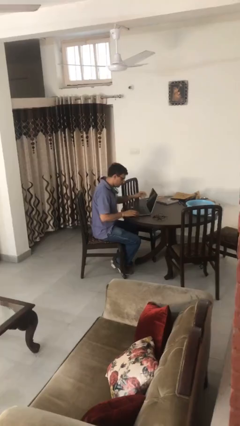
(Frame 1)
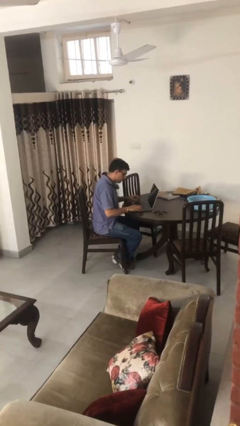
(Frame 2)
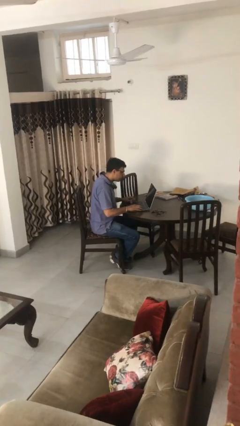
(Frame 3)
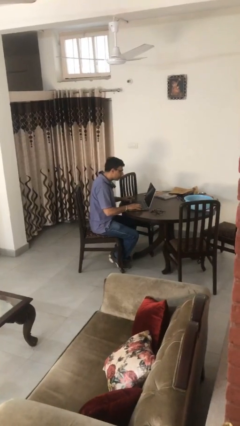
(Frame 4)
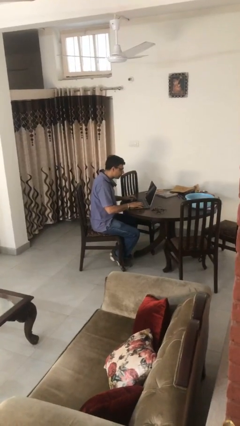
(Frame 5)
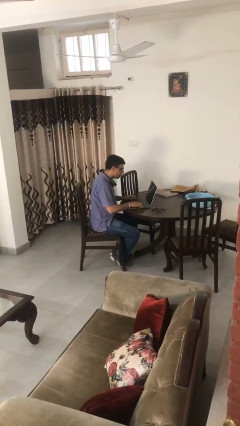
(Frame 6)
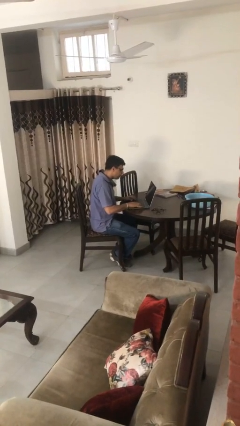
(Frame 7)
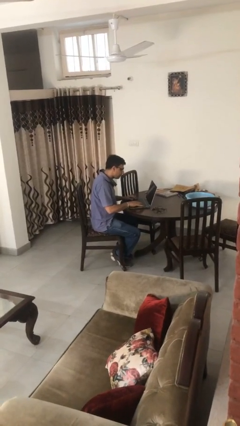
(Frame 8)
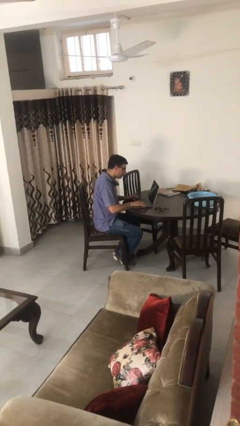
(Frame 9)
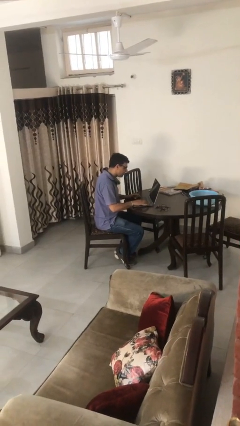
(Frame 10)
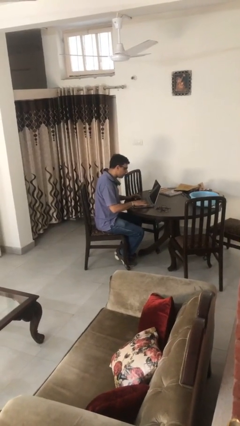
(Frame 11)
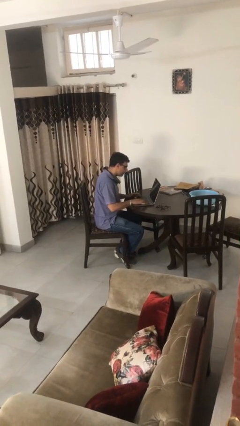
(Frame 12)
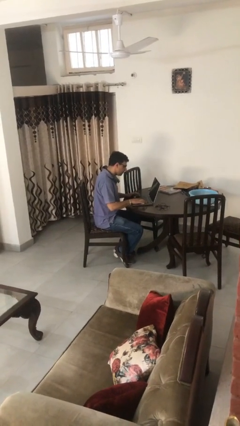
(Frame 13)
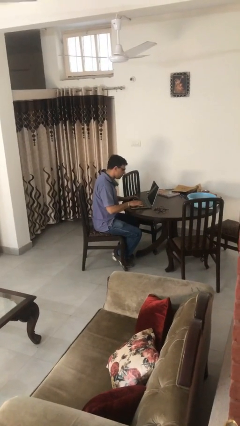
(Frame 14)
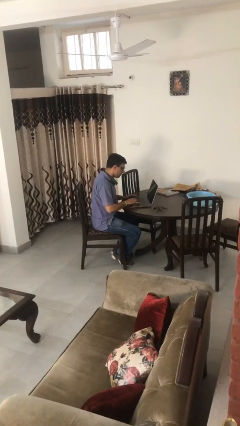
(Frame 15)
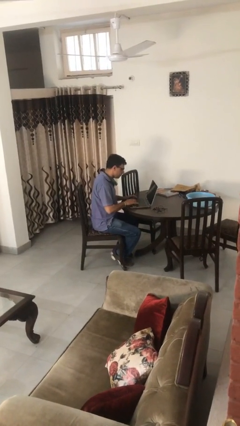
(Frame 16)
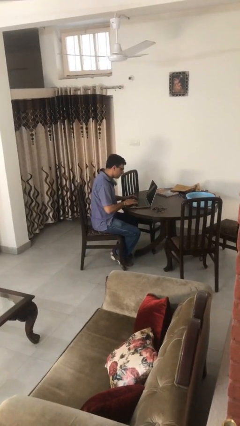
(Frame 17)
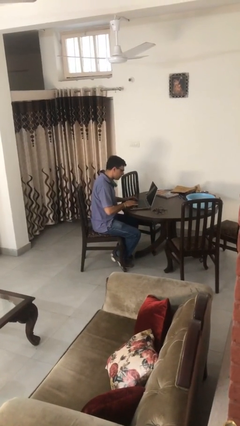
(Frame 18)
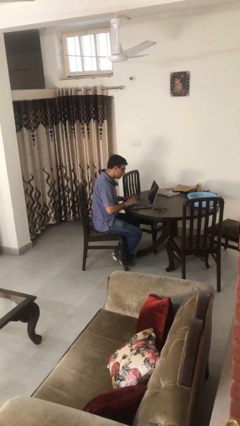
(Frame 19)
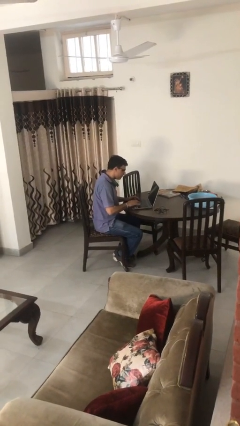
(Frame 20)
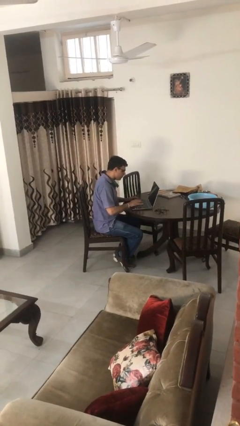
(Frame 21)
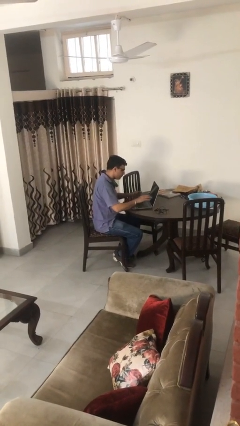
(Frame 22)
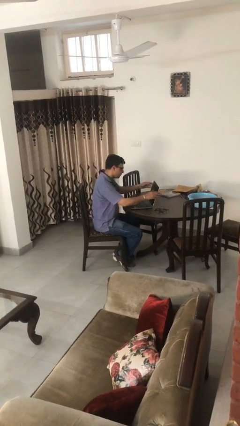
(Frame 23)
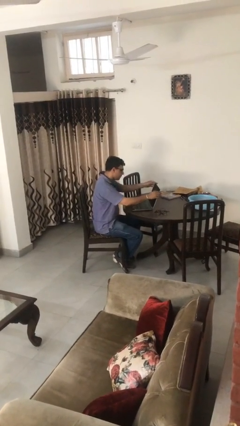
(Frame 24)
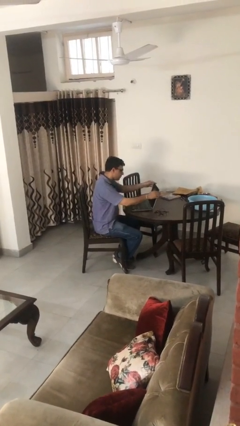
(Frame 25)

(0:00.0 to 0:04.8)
person interacts with laptop

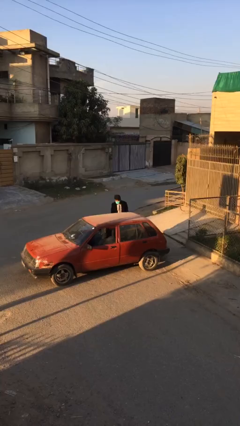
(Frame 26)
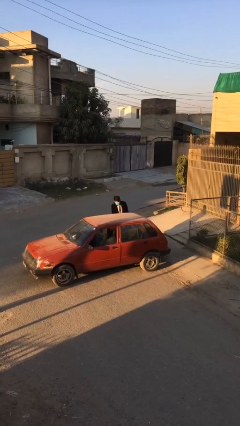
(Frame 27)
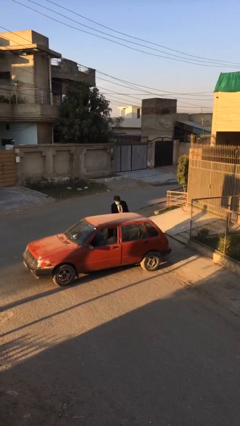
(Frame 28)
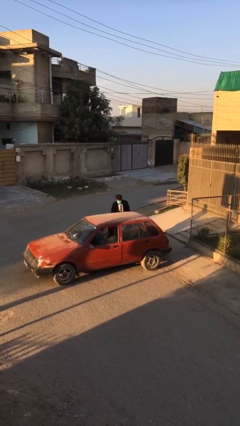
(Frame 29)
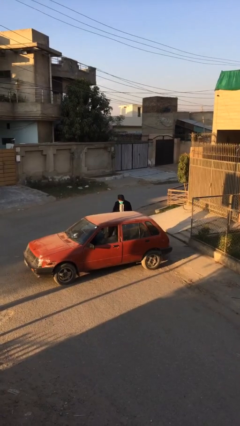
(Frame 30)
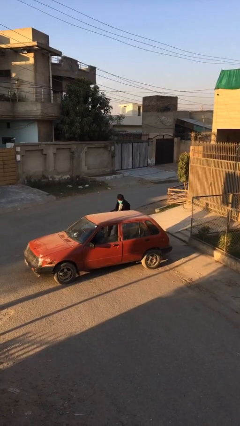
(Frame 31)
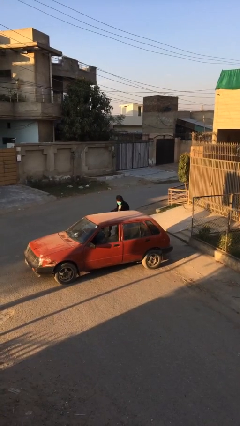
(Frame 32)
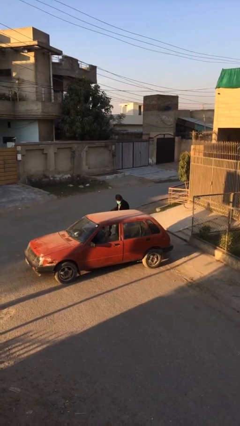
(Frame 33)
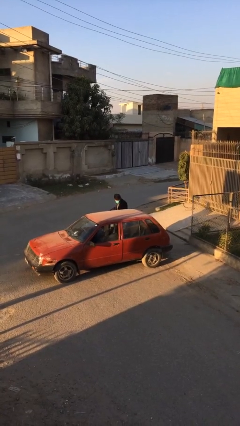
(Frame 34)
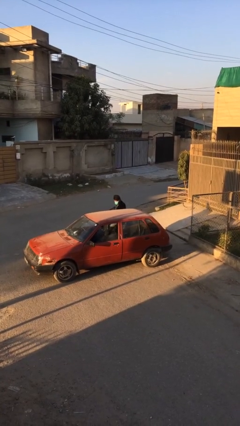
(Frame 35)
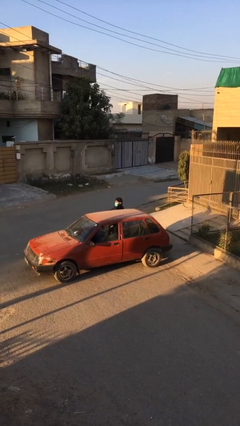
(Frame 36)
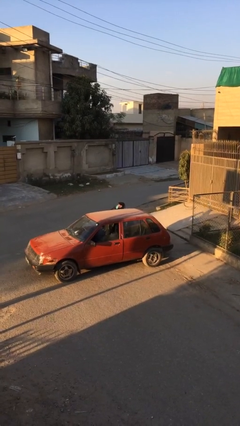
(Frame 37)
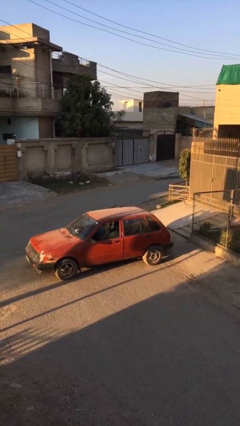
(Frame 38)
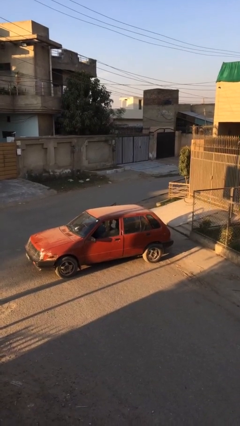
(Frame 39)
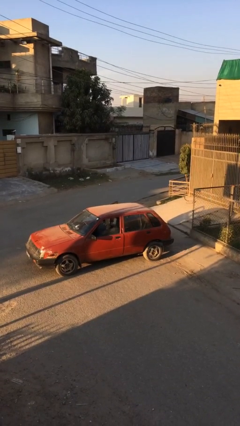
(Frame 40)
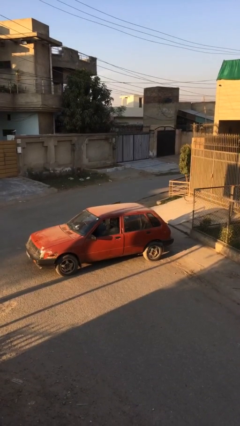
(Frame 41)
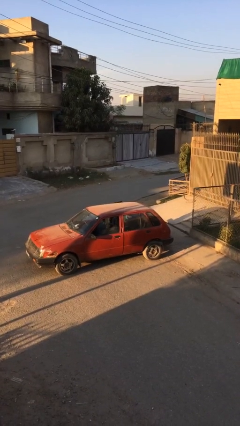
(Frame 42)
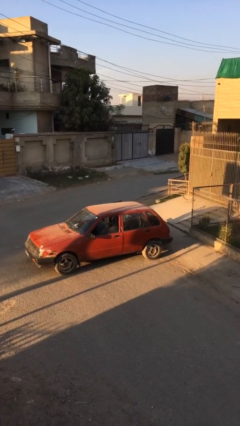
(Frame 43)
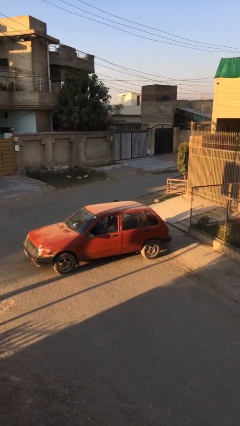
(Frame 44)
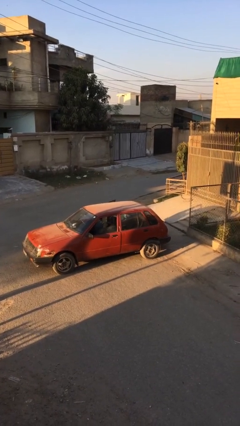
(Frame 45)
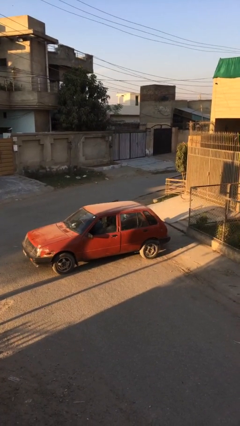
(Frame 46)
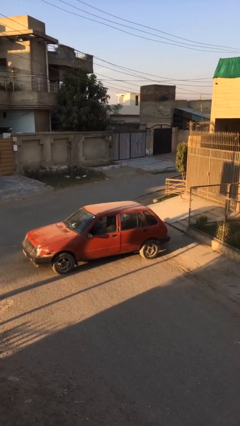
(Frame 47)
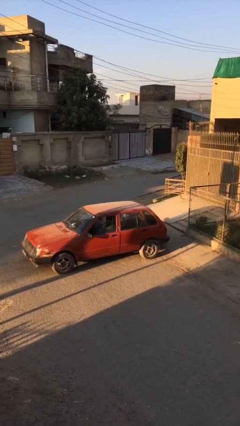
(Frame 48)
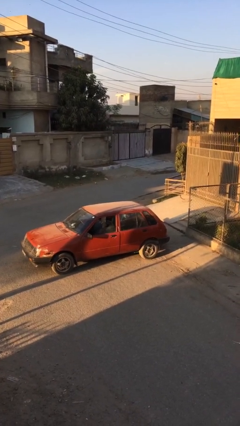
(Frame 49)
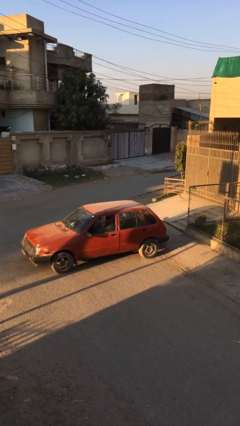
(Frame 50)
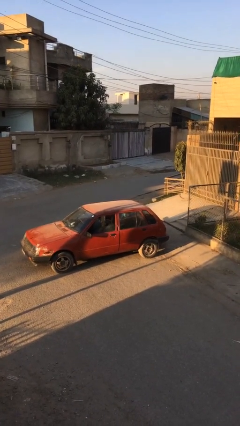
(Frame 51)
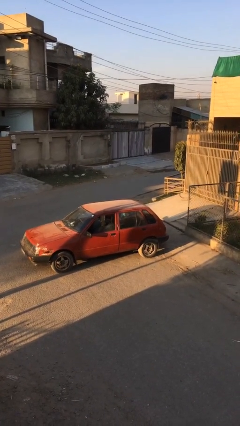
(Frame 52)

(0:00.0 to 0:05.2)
person enters car

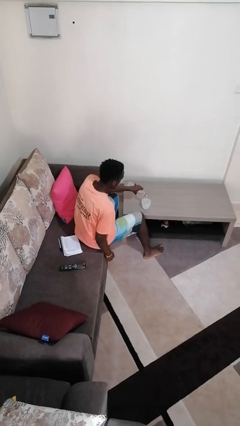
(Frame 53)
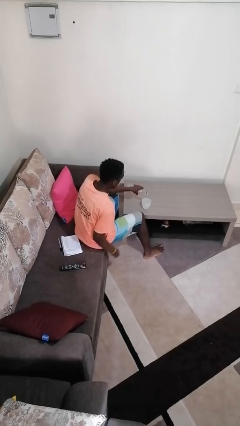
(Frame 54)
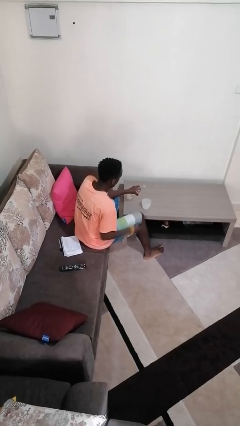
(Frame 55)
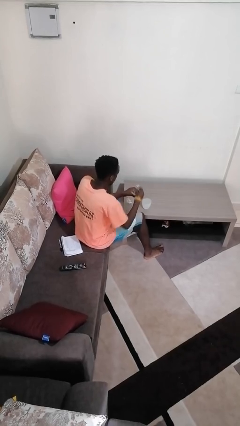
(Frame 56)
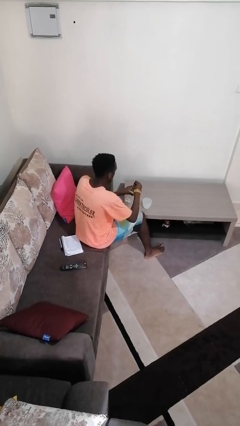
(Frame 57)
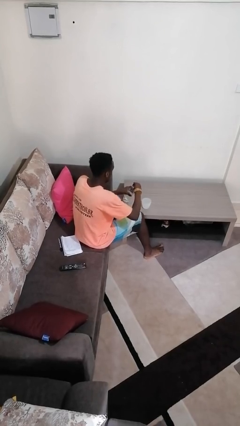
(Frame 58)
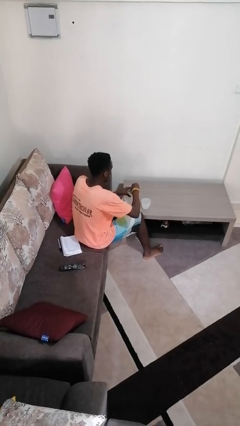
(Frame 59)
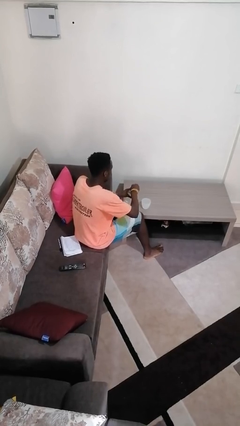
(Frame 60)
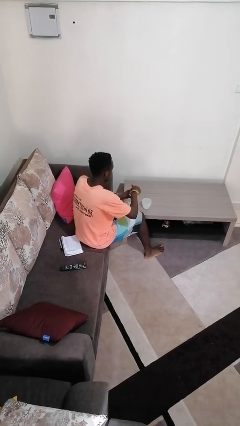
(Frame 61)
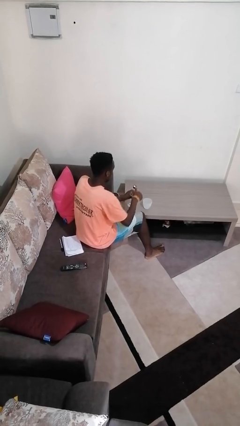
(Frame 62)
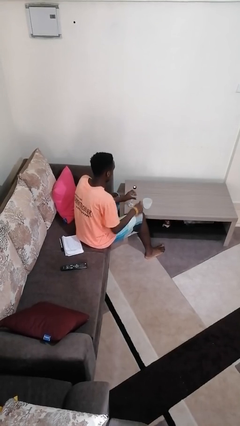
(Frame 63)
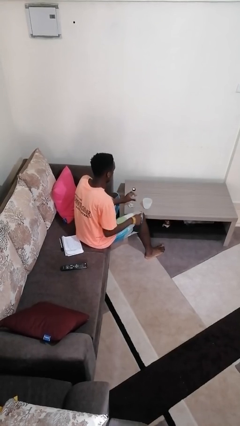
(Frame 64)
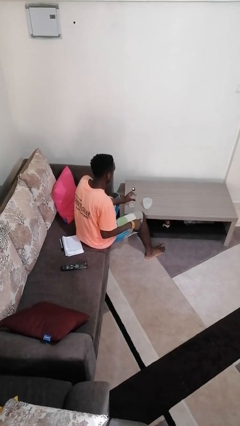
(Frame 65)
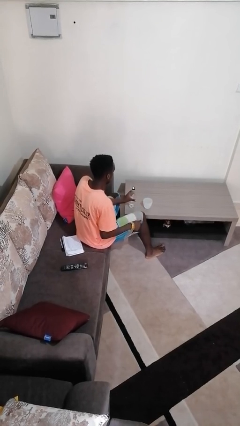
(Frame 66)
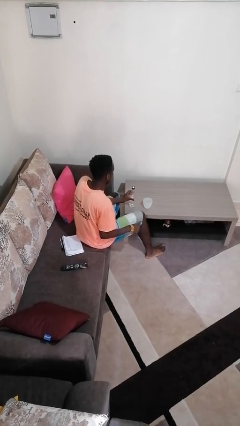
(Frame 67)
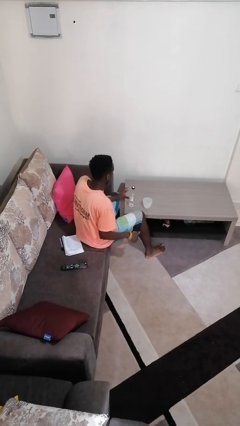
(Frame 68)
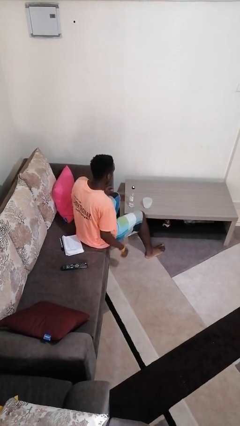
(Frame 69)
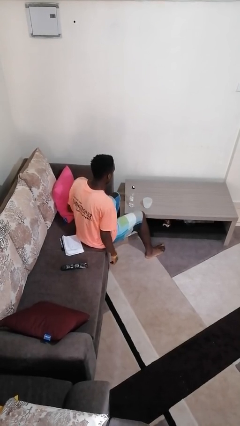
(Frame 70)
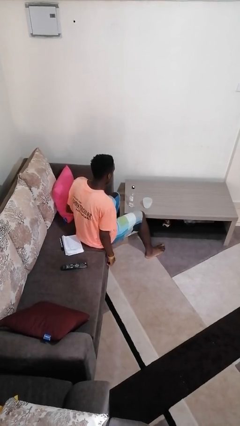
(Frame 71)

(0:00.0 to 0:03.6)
person screws lid to bottle

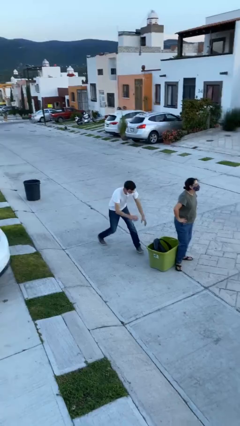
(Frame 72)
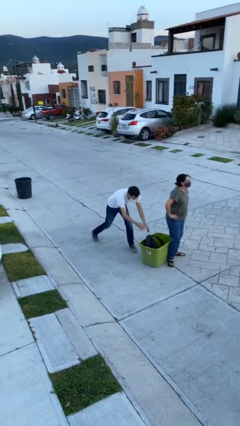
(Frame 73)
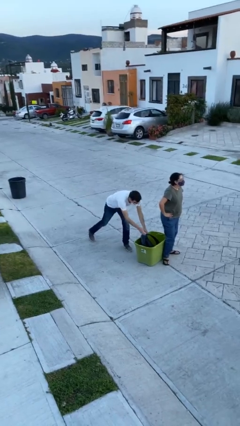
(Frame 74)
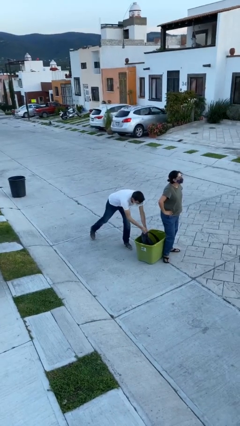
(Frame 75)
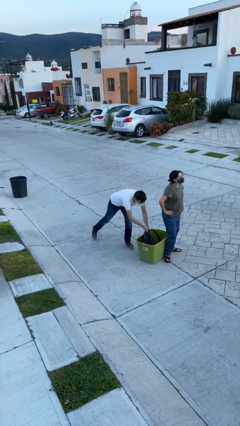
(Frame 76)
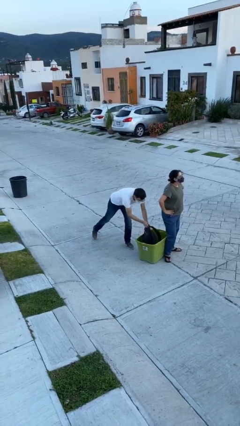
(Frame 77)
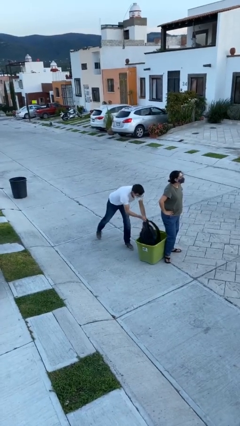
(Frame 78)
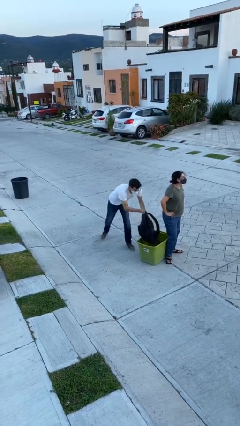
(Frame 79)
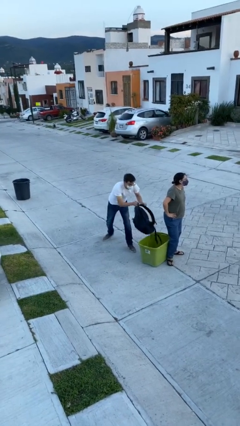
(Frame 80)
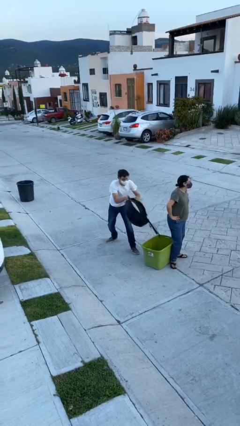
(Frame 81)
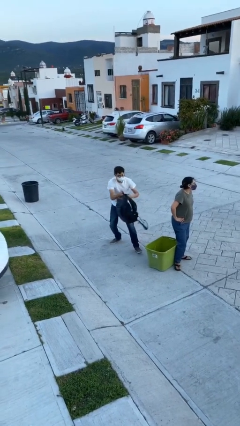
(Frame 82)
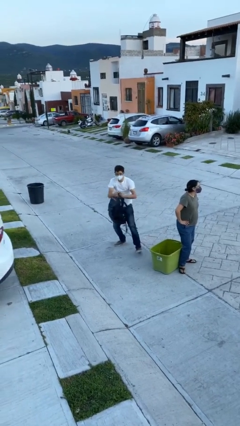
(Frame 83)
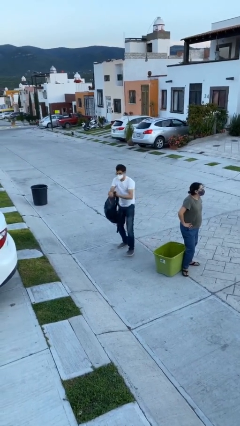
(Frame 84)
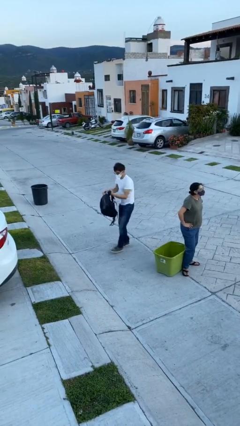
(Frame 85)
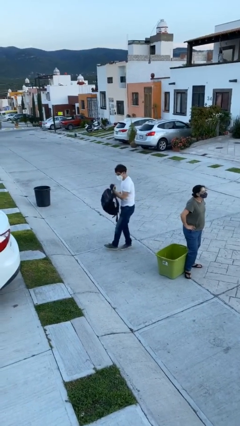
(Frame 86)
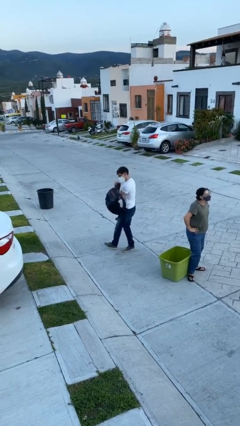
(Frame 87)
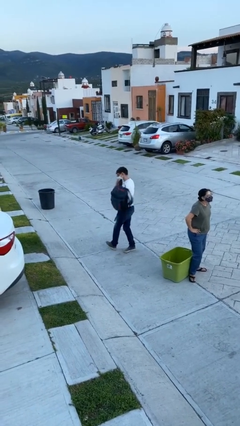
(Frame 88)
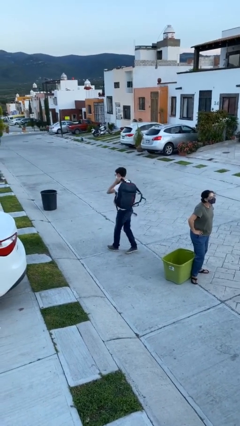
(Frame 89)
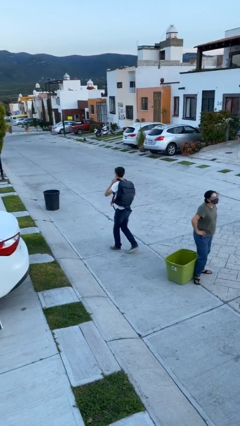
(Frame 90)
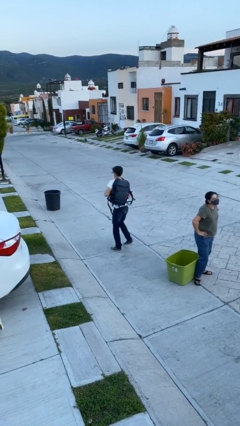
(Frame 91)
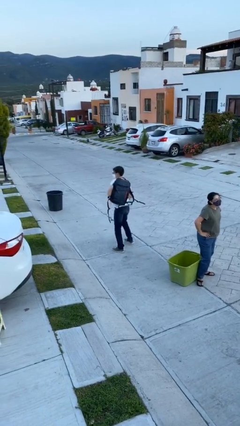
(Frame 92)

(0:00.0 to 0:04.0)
person steals object from person
